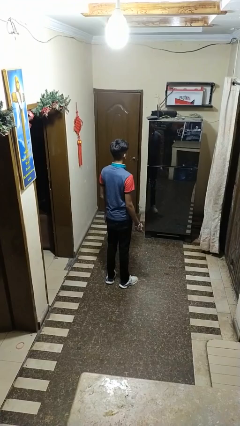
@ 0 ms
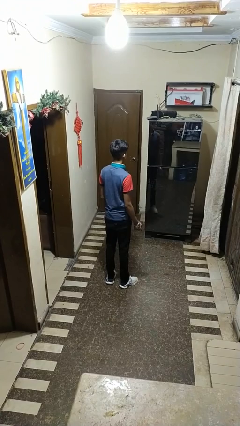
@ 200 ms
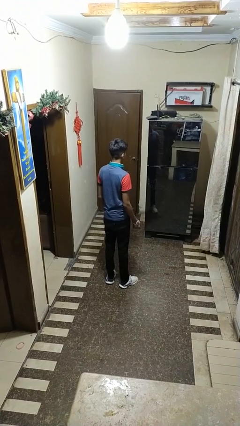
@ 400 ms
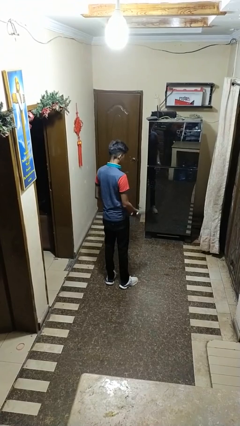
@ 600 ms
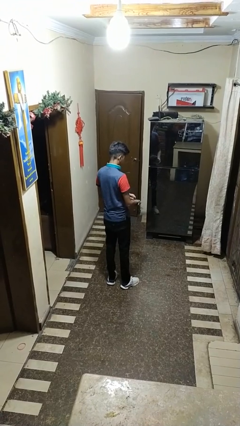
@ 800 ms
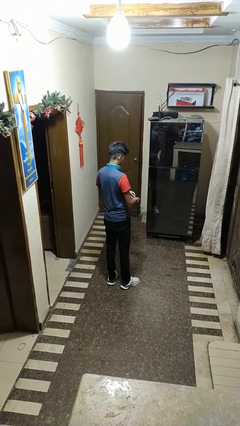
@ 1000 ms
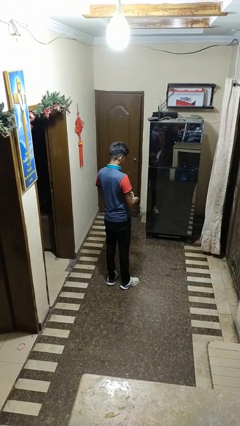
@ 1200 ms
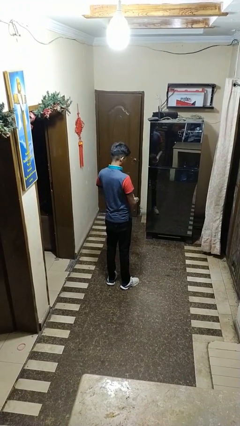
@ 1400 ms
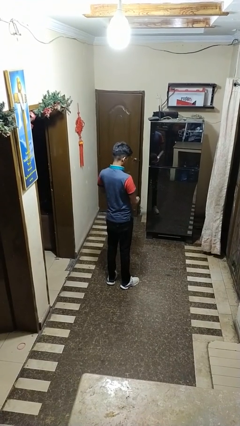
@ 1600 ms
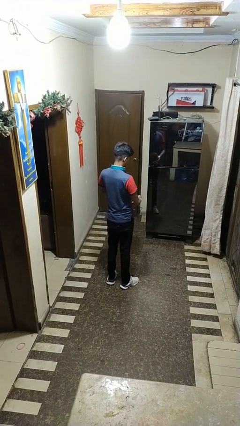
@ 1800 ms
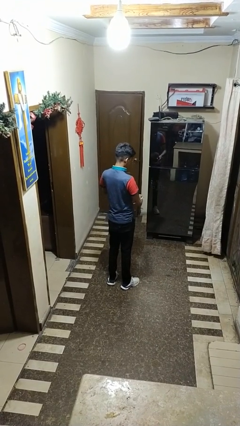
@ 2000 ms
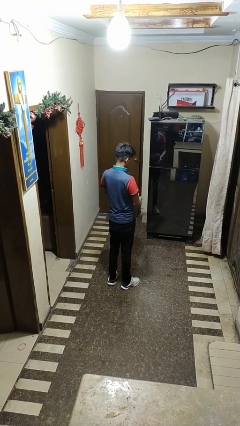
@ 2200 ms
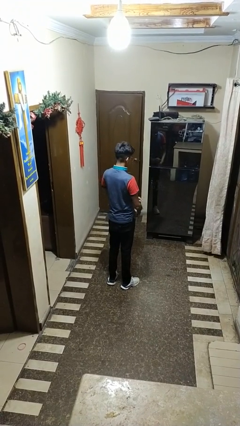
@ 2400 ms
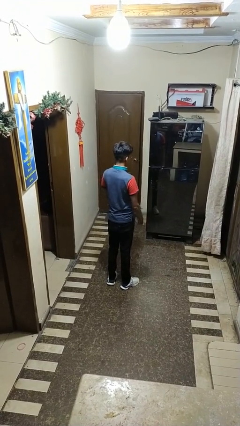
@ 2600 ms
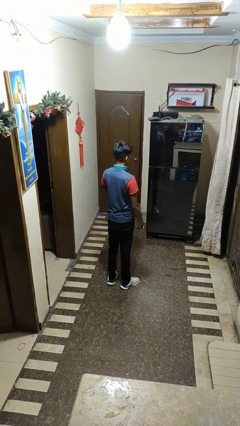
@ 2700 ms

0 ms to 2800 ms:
person takes off wristwatch

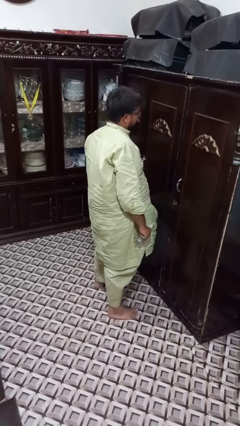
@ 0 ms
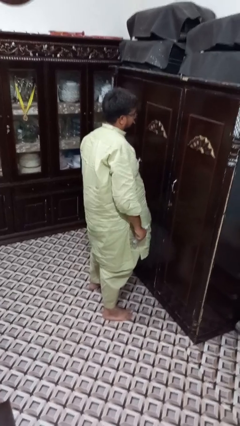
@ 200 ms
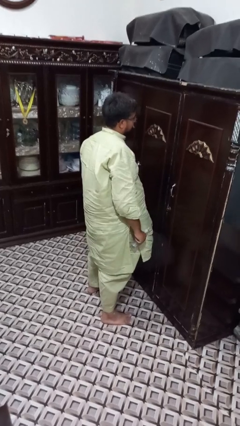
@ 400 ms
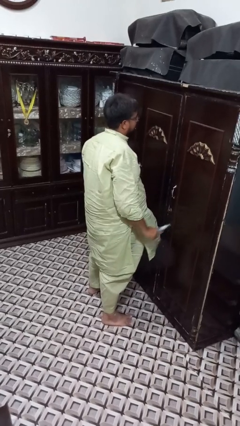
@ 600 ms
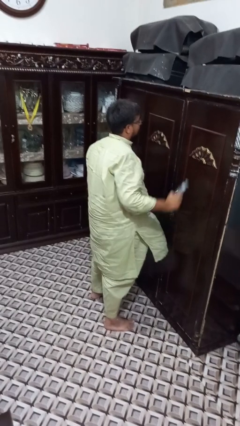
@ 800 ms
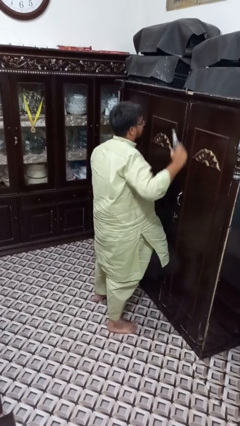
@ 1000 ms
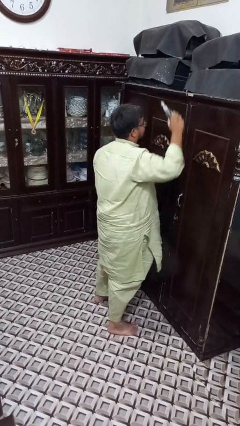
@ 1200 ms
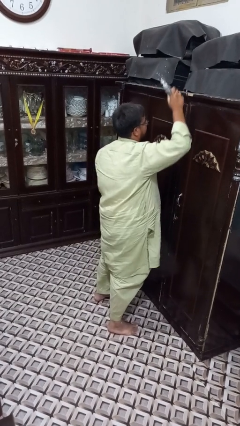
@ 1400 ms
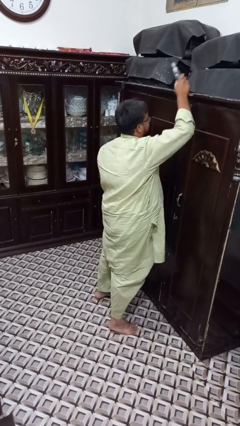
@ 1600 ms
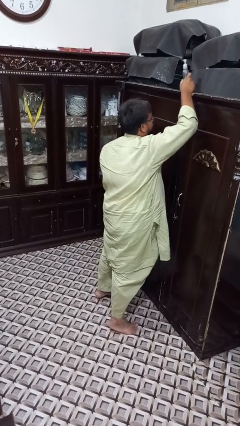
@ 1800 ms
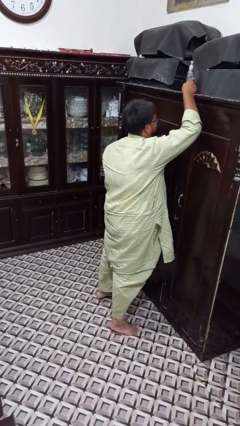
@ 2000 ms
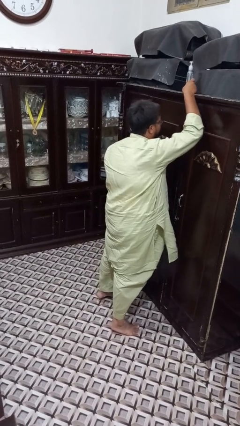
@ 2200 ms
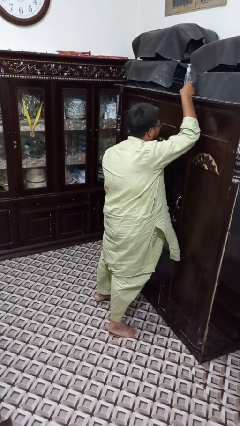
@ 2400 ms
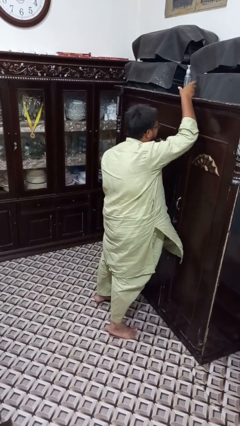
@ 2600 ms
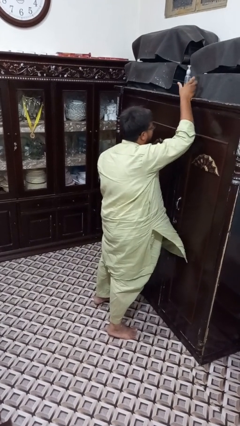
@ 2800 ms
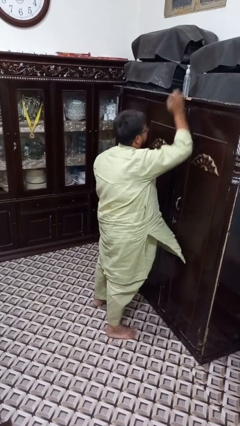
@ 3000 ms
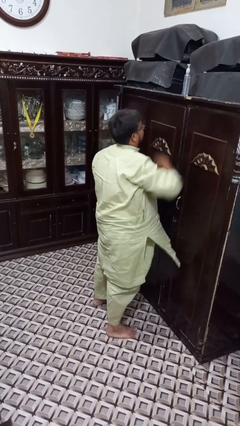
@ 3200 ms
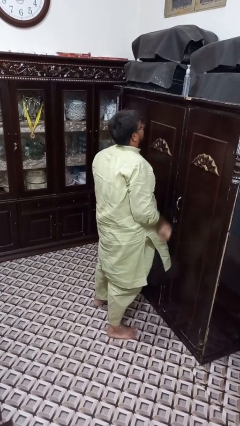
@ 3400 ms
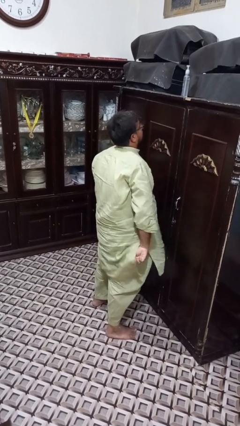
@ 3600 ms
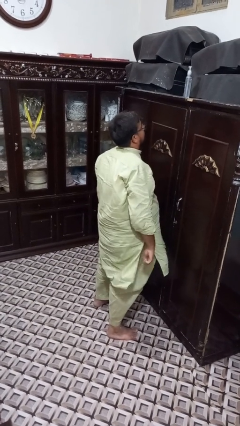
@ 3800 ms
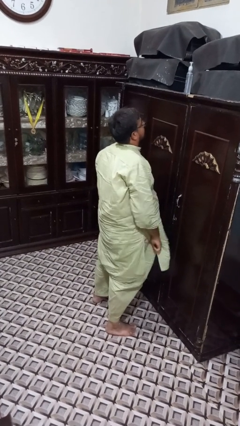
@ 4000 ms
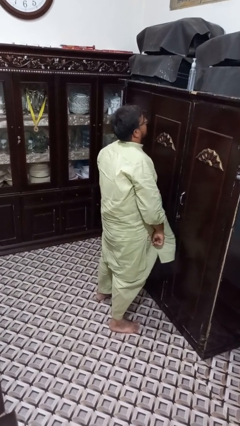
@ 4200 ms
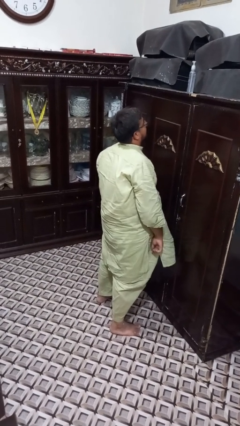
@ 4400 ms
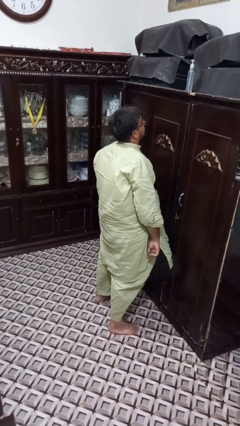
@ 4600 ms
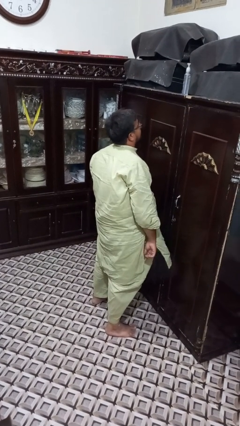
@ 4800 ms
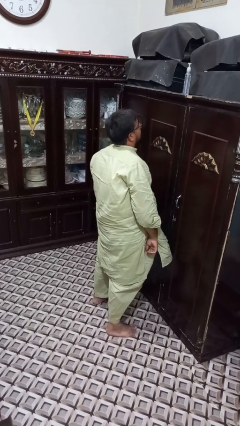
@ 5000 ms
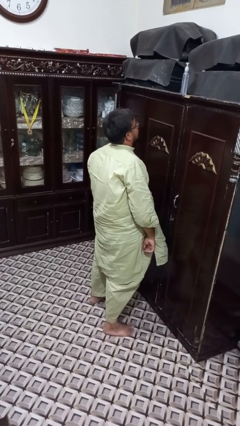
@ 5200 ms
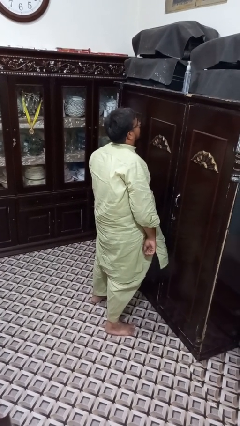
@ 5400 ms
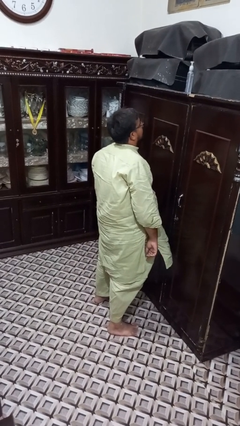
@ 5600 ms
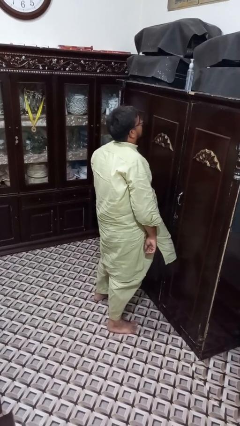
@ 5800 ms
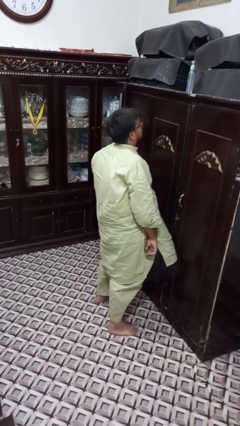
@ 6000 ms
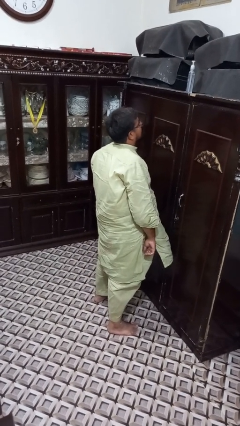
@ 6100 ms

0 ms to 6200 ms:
person puts down object on shelf

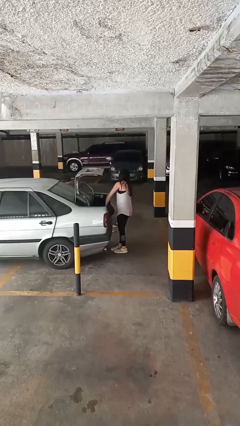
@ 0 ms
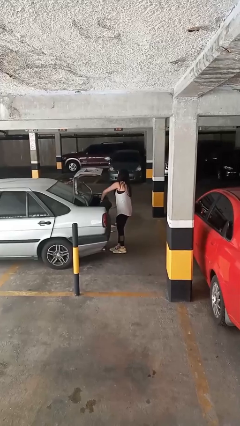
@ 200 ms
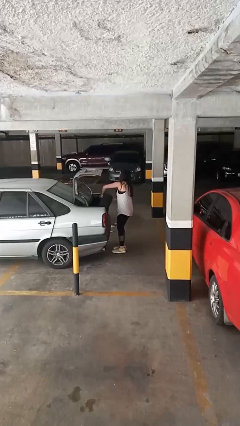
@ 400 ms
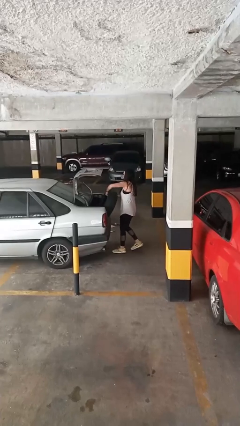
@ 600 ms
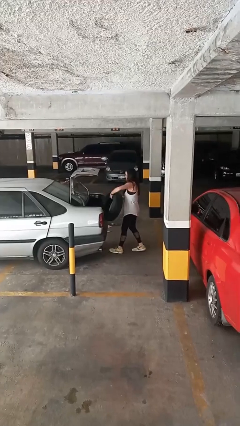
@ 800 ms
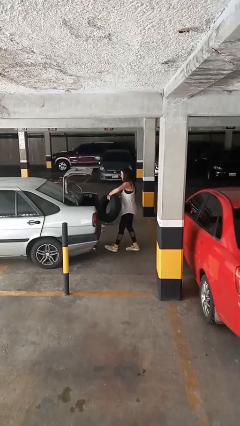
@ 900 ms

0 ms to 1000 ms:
person unloads car

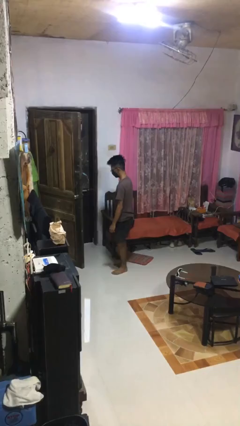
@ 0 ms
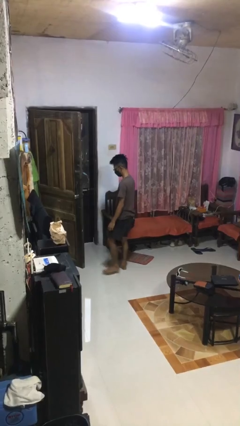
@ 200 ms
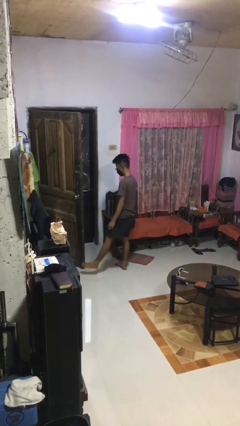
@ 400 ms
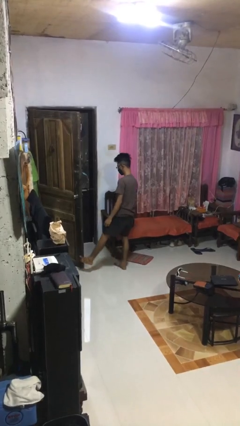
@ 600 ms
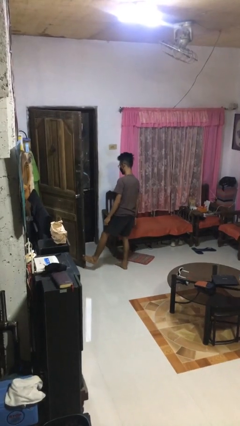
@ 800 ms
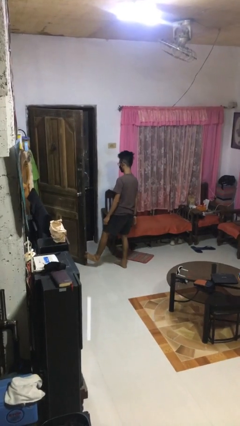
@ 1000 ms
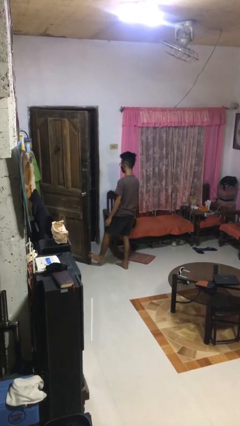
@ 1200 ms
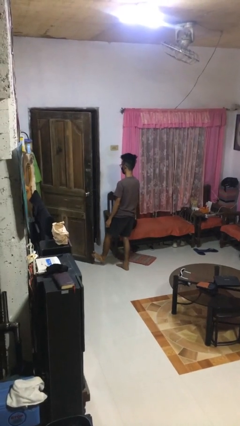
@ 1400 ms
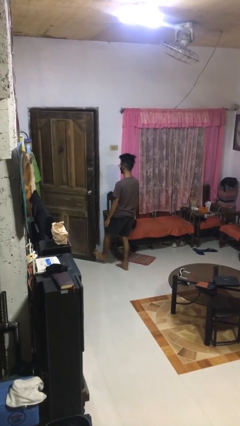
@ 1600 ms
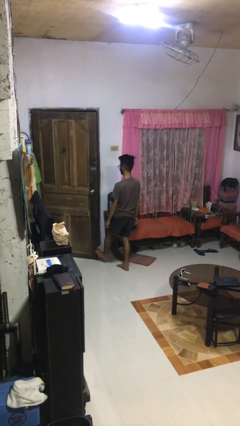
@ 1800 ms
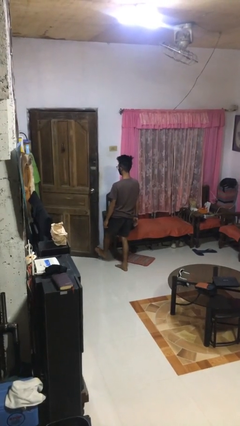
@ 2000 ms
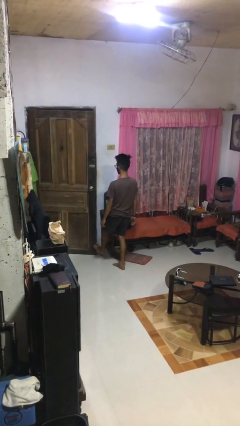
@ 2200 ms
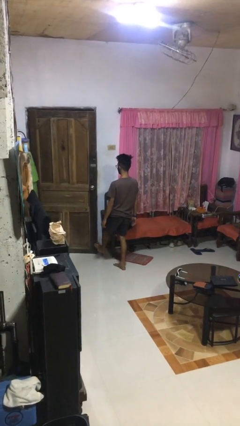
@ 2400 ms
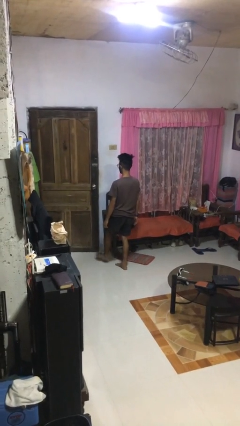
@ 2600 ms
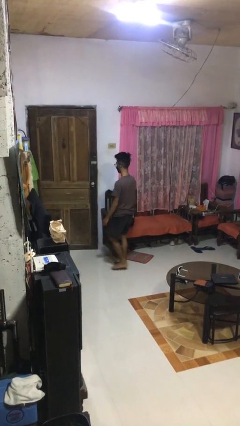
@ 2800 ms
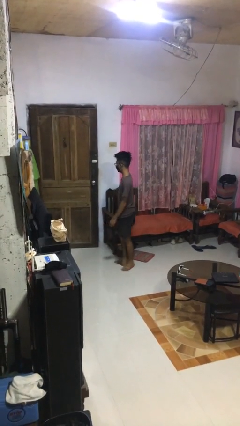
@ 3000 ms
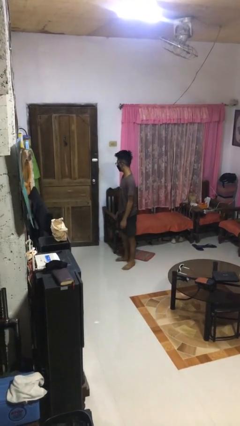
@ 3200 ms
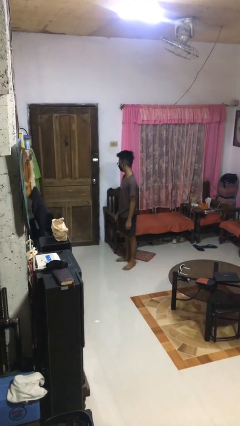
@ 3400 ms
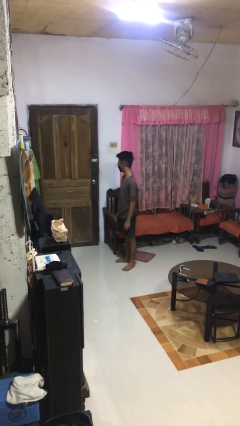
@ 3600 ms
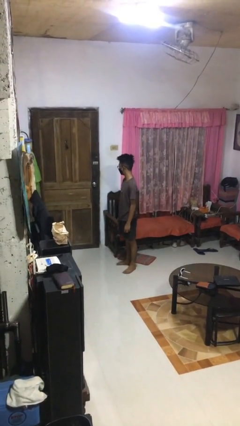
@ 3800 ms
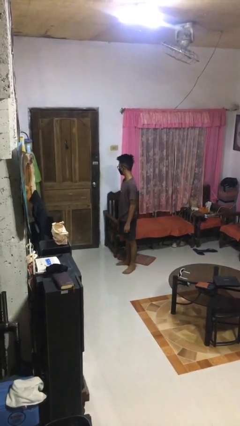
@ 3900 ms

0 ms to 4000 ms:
person closes door with foot

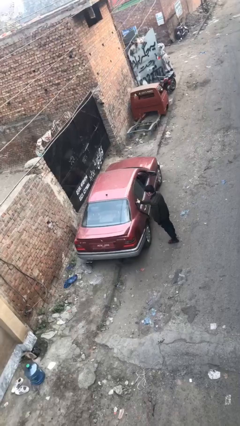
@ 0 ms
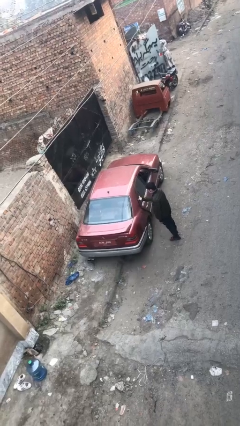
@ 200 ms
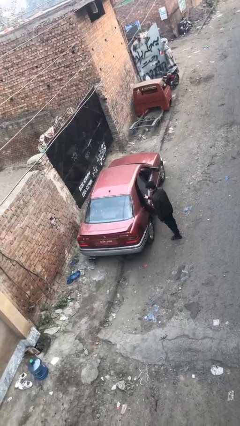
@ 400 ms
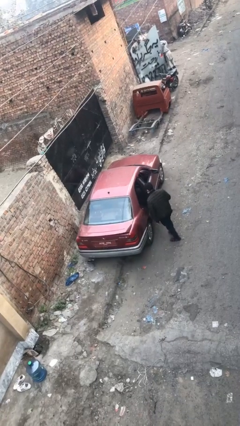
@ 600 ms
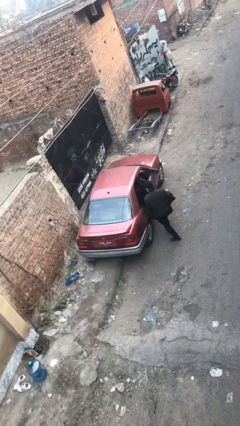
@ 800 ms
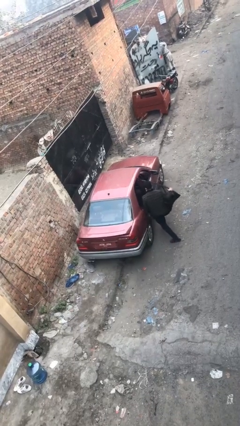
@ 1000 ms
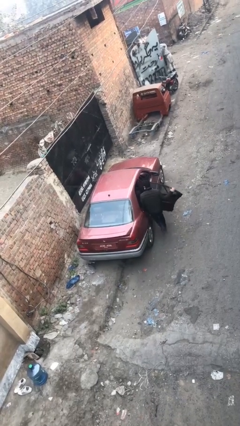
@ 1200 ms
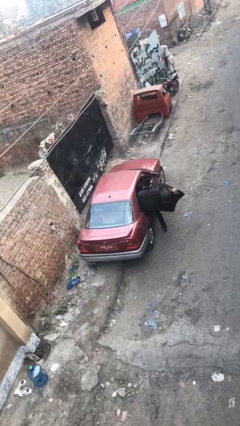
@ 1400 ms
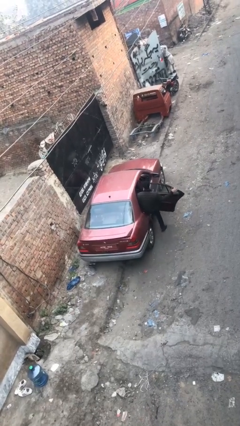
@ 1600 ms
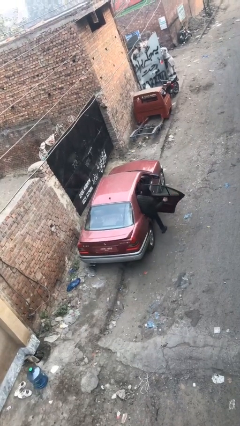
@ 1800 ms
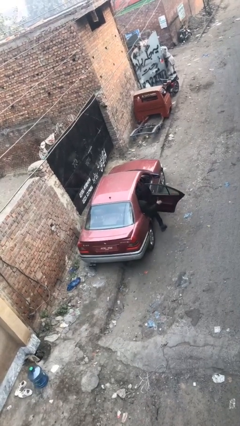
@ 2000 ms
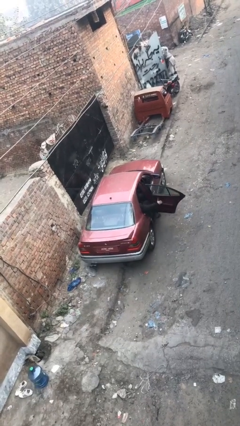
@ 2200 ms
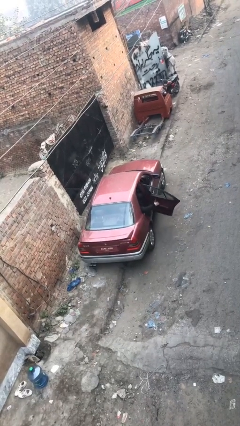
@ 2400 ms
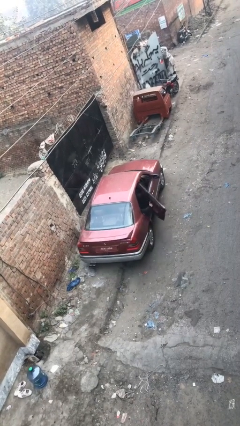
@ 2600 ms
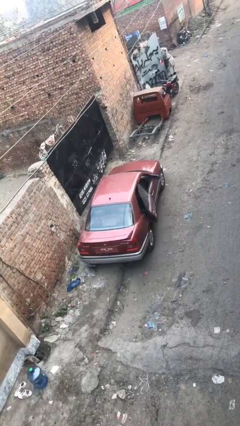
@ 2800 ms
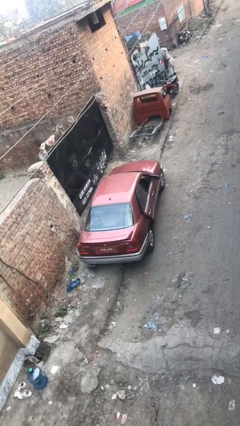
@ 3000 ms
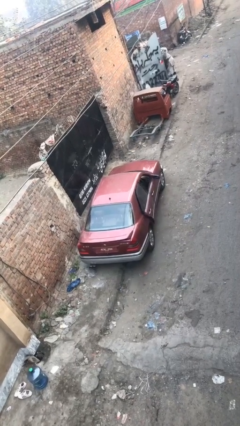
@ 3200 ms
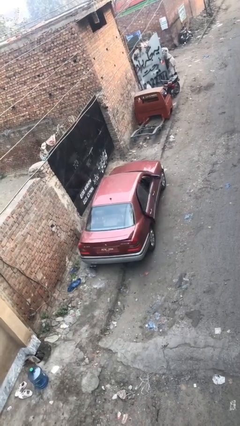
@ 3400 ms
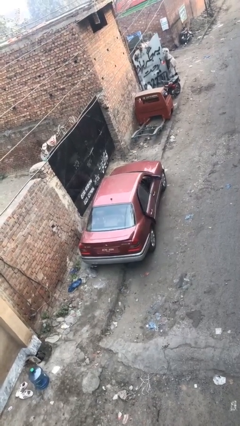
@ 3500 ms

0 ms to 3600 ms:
car picks up person

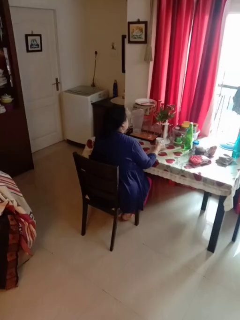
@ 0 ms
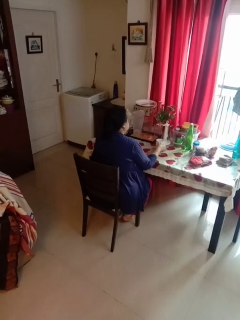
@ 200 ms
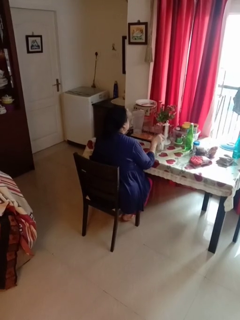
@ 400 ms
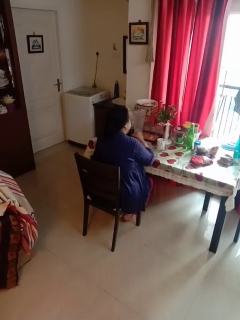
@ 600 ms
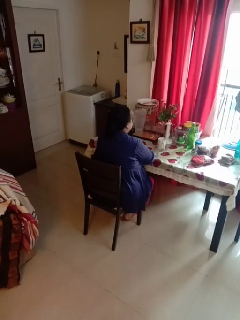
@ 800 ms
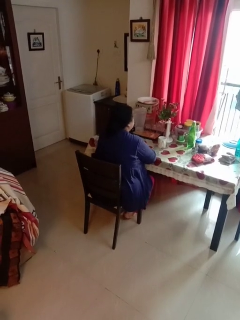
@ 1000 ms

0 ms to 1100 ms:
person puts down object on table
